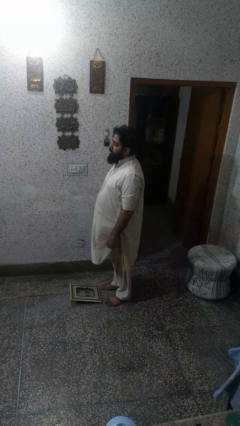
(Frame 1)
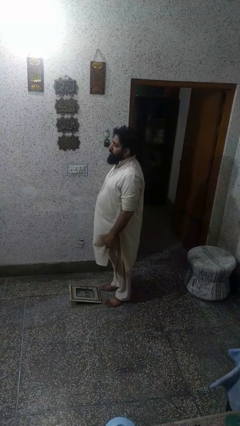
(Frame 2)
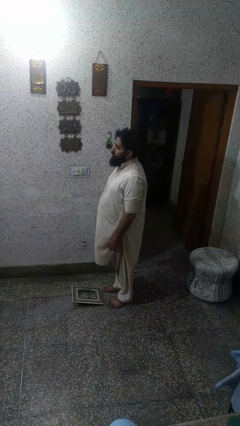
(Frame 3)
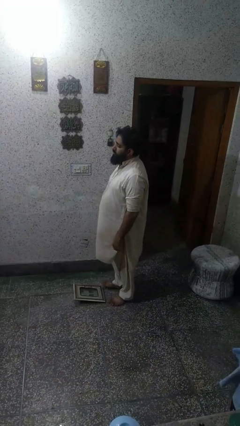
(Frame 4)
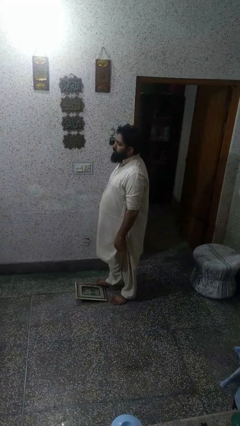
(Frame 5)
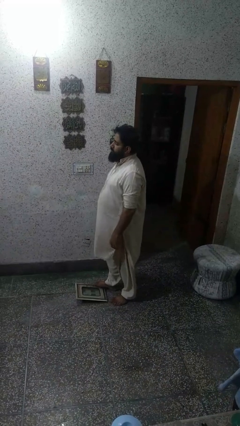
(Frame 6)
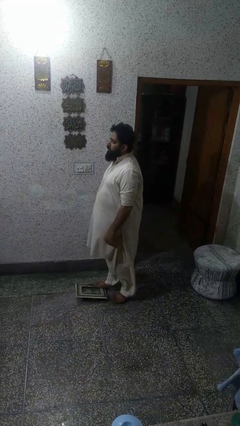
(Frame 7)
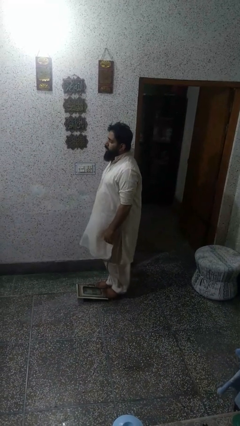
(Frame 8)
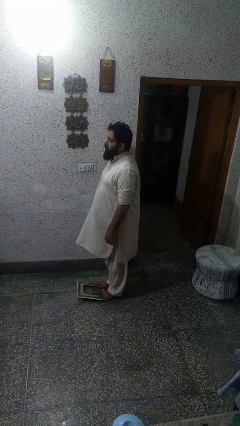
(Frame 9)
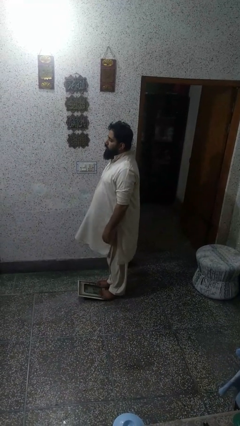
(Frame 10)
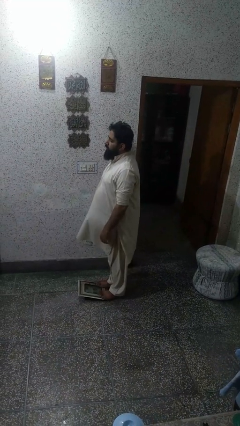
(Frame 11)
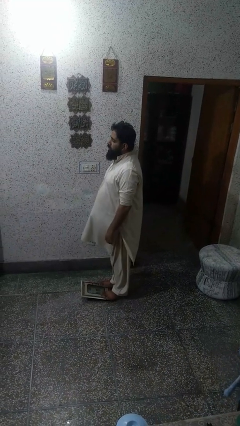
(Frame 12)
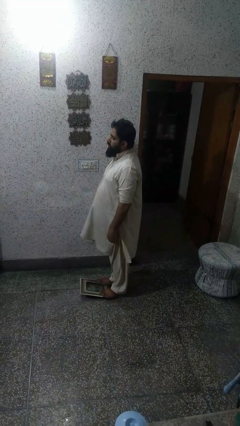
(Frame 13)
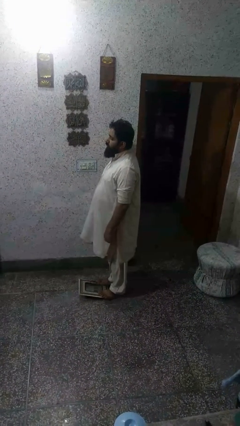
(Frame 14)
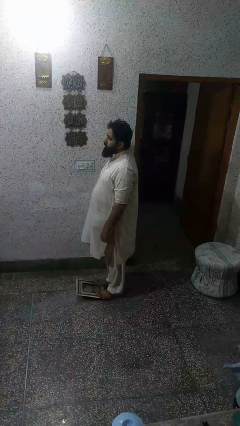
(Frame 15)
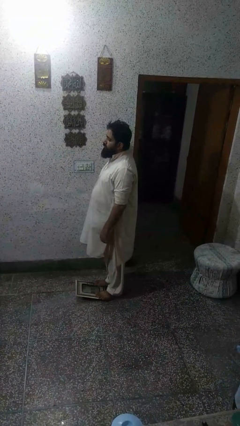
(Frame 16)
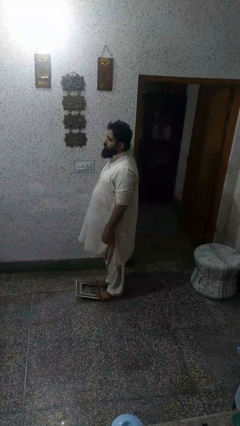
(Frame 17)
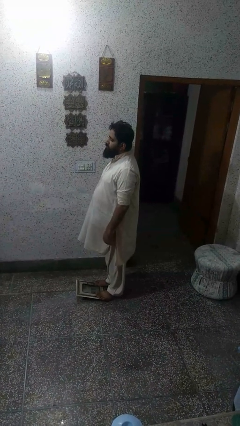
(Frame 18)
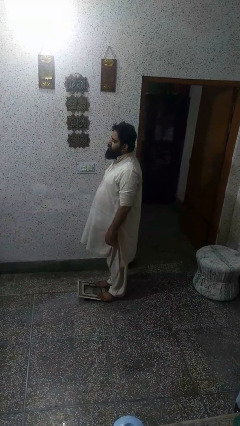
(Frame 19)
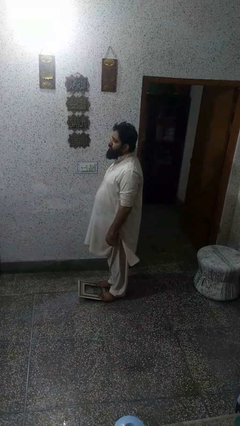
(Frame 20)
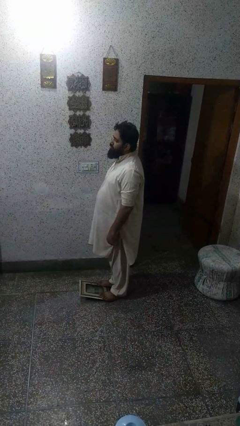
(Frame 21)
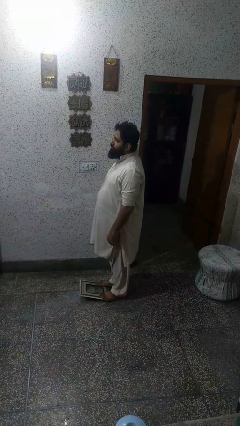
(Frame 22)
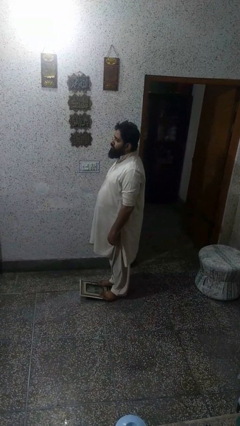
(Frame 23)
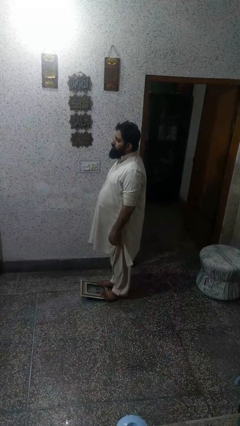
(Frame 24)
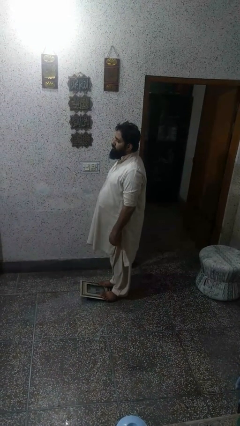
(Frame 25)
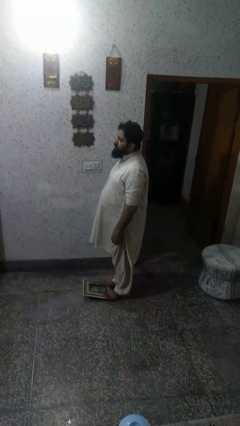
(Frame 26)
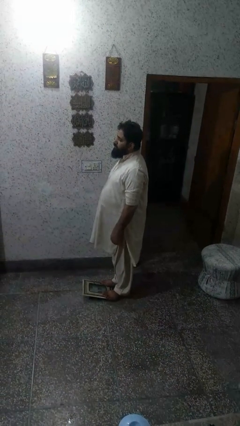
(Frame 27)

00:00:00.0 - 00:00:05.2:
person uses bodyweight scale

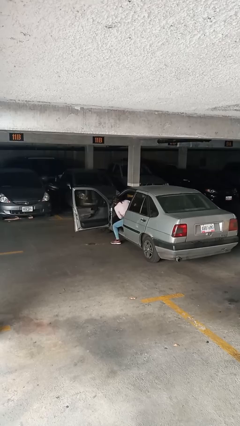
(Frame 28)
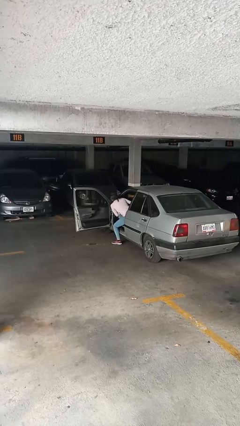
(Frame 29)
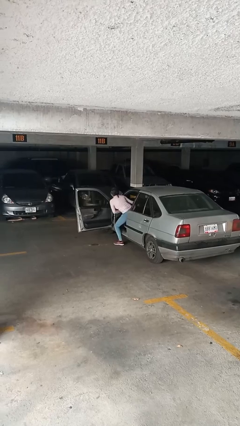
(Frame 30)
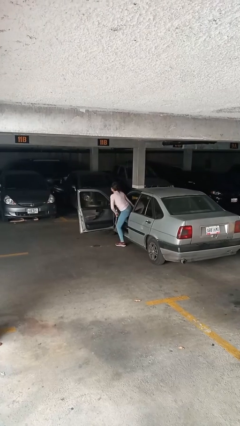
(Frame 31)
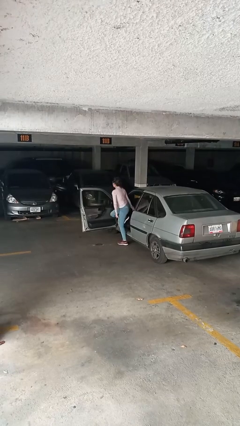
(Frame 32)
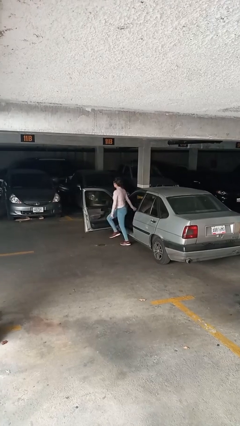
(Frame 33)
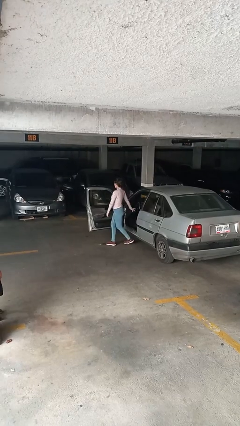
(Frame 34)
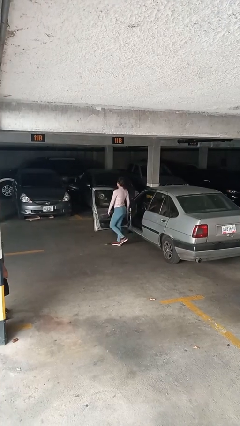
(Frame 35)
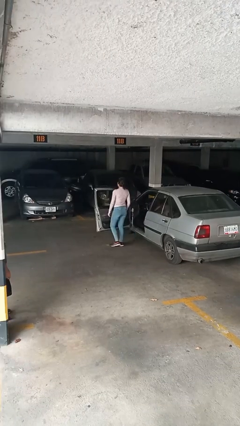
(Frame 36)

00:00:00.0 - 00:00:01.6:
person exits car

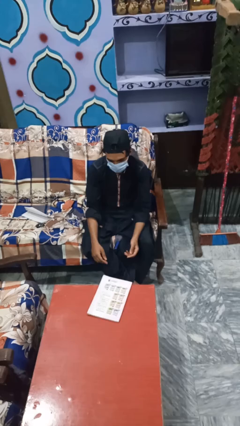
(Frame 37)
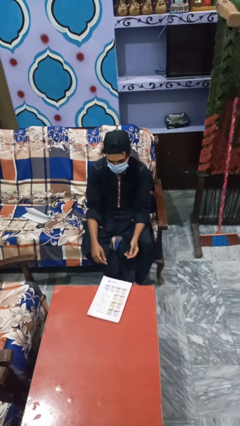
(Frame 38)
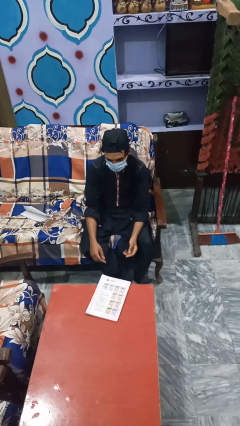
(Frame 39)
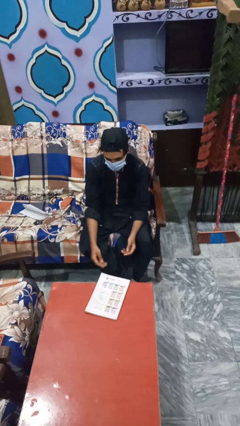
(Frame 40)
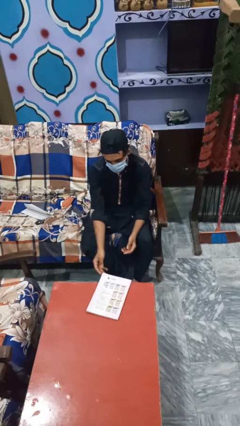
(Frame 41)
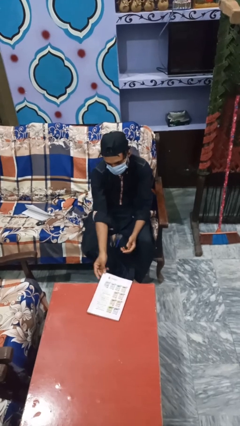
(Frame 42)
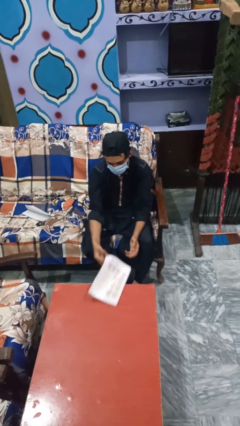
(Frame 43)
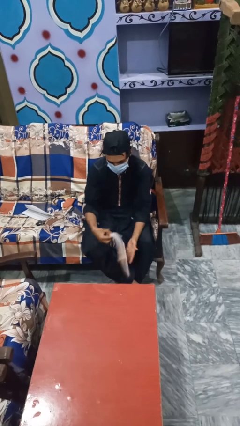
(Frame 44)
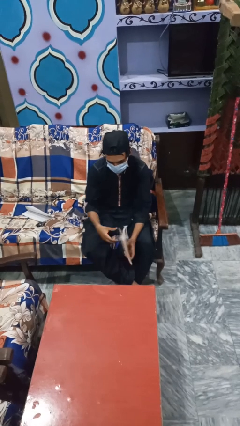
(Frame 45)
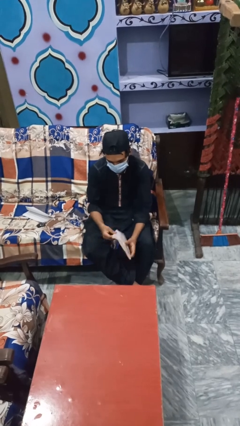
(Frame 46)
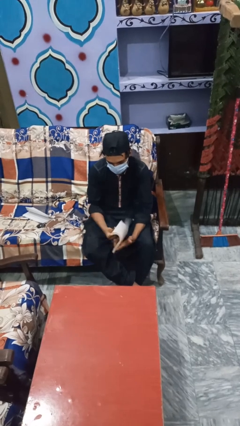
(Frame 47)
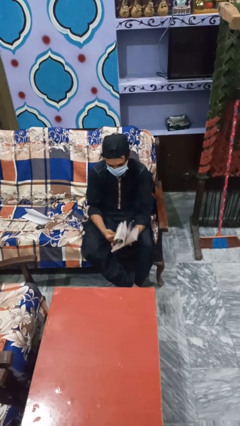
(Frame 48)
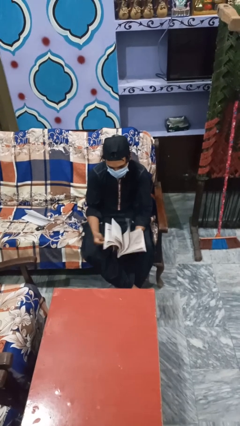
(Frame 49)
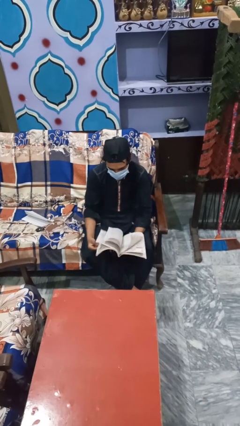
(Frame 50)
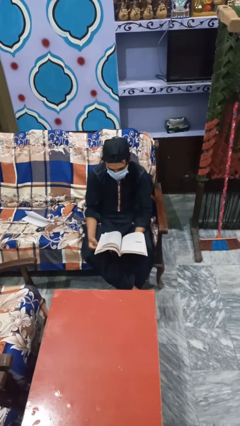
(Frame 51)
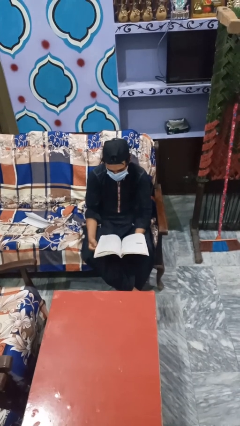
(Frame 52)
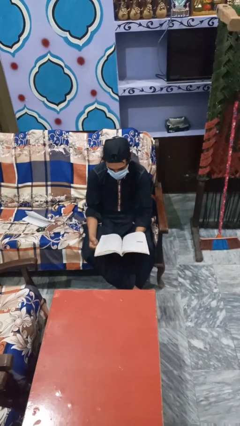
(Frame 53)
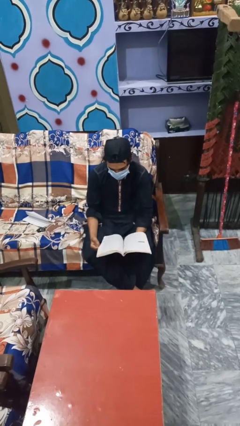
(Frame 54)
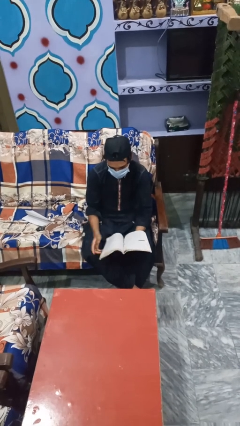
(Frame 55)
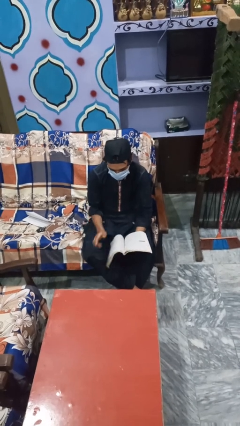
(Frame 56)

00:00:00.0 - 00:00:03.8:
person reads magazine

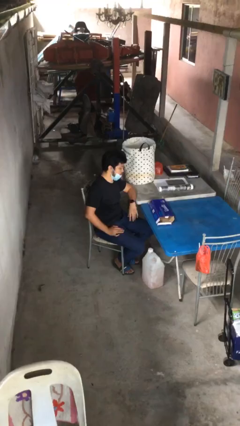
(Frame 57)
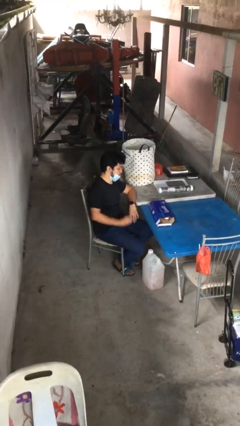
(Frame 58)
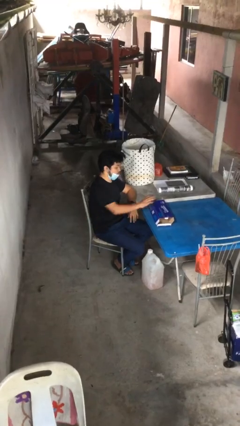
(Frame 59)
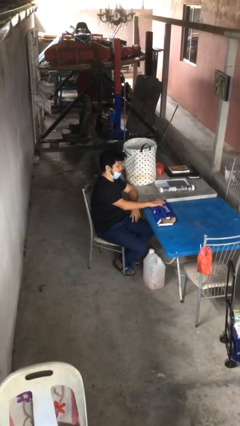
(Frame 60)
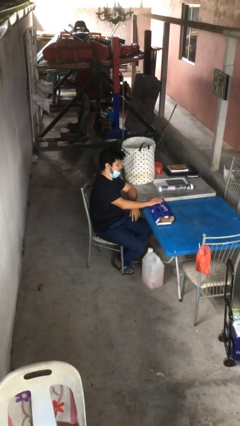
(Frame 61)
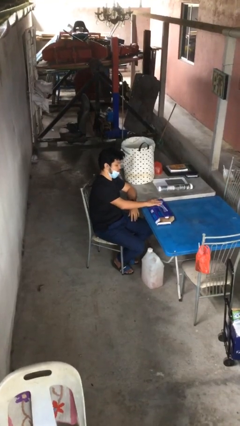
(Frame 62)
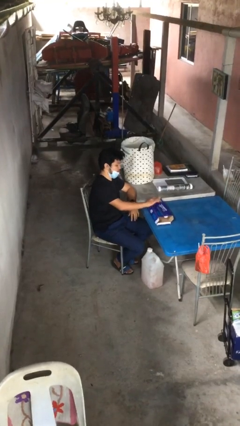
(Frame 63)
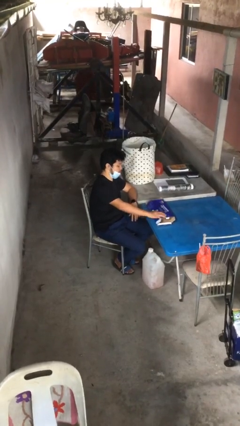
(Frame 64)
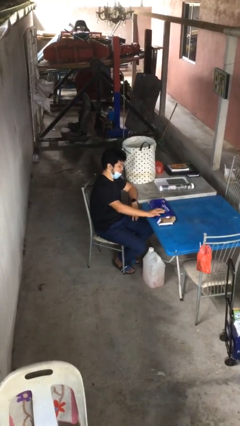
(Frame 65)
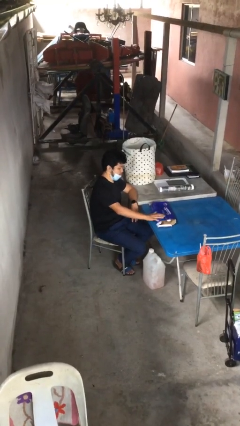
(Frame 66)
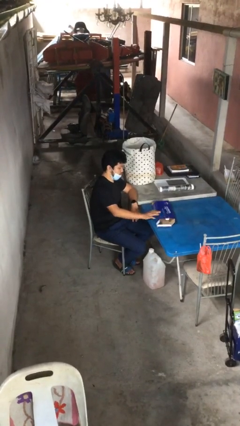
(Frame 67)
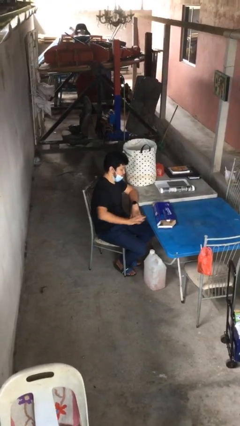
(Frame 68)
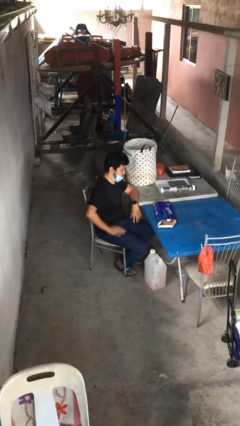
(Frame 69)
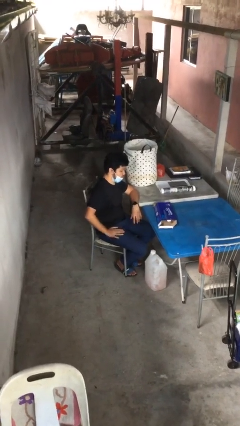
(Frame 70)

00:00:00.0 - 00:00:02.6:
person taps object with finger

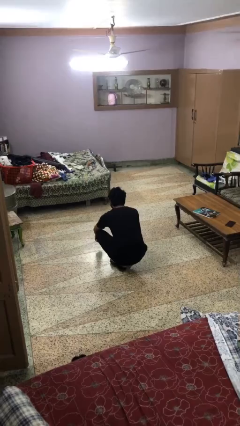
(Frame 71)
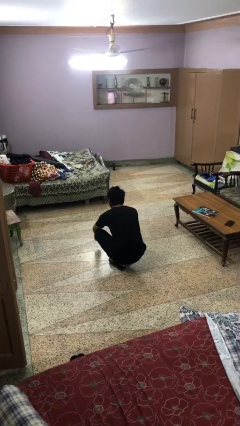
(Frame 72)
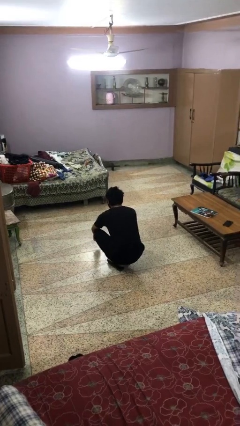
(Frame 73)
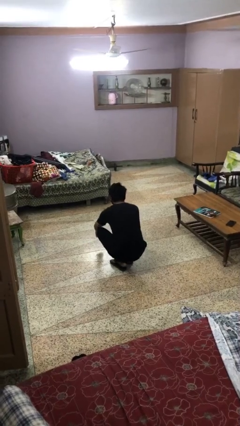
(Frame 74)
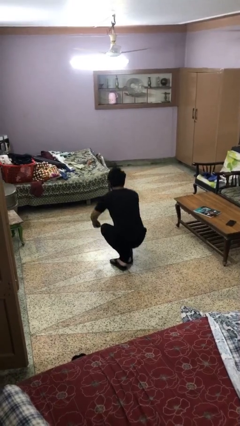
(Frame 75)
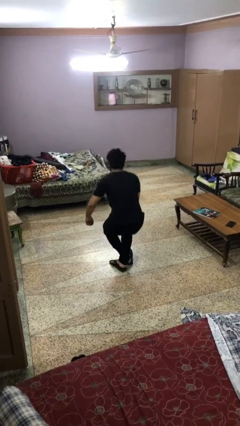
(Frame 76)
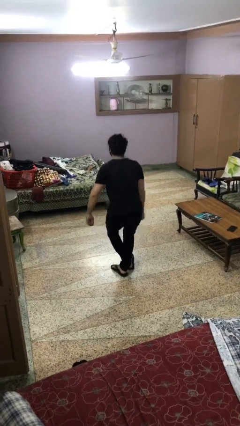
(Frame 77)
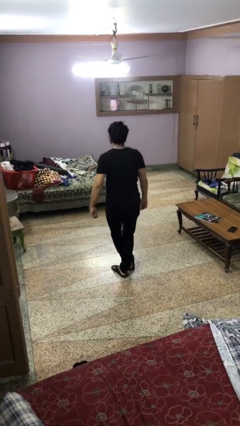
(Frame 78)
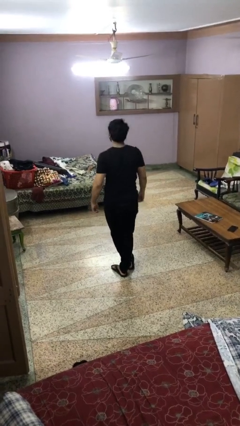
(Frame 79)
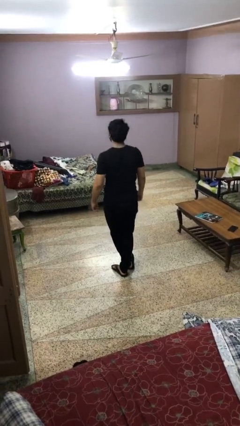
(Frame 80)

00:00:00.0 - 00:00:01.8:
person stands up from floor

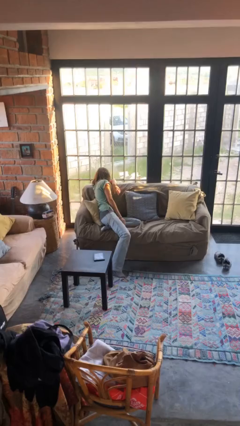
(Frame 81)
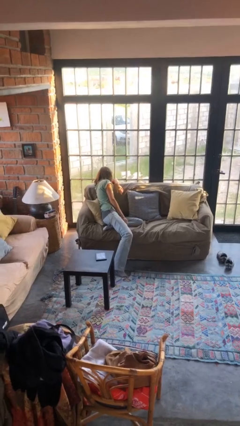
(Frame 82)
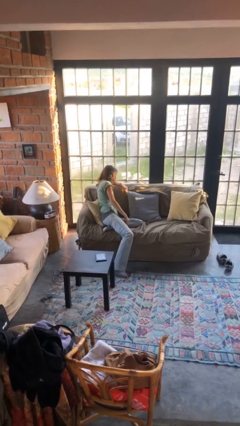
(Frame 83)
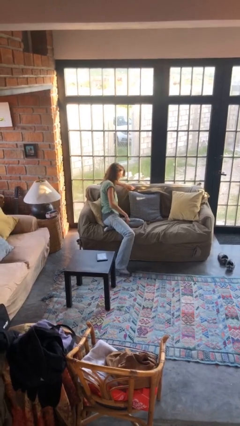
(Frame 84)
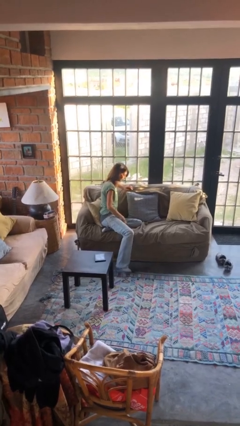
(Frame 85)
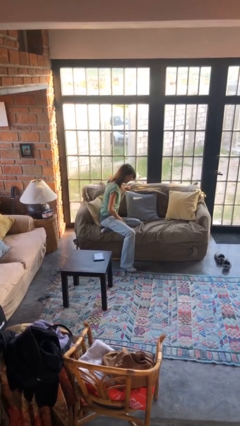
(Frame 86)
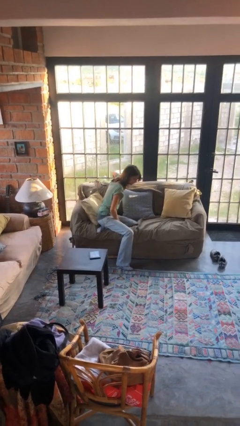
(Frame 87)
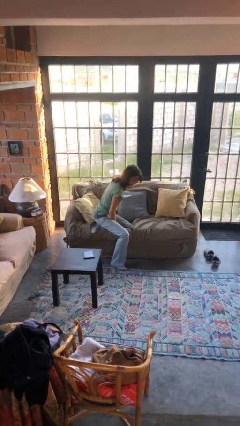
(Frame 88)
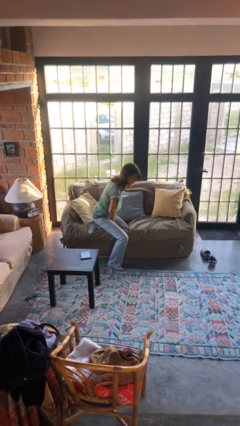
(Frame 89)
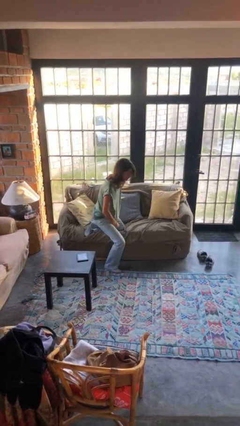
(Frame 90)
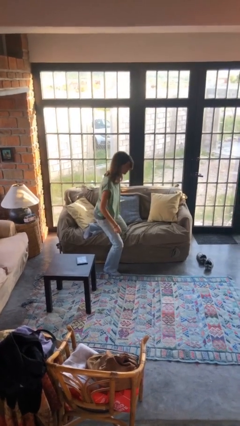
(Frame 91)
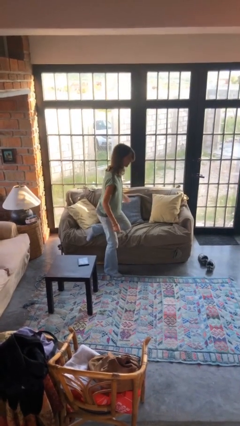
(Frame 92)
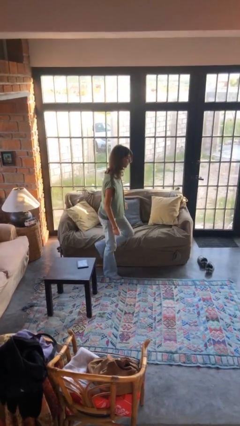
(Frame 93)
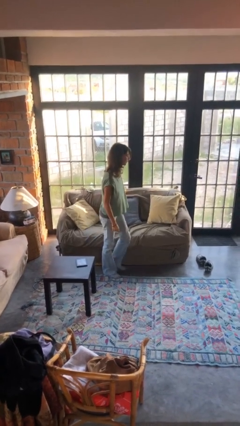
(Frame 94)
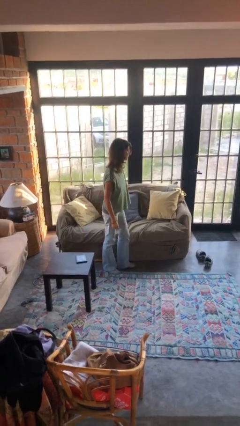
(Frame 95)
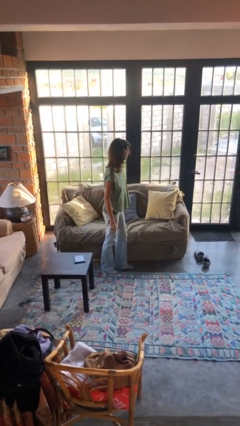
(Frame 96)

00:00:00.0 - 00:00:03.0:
person stands up
